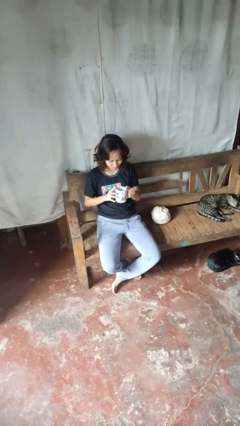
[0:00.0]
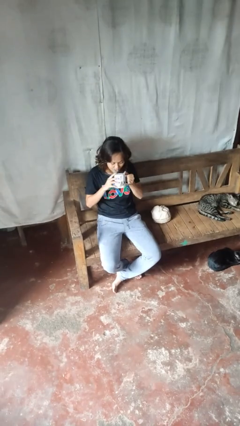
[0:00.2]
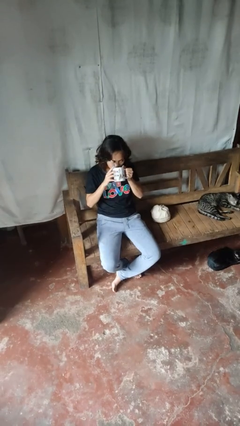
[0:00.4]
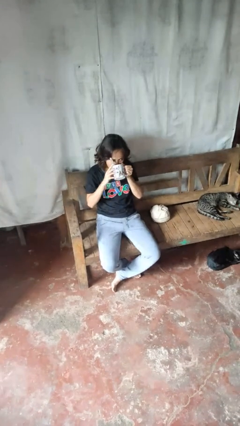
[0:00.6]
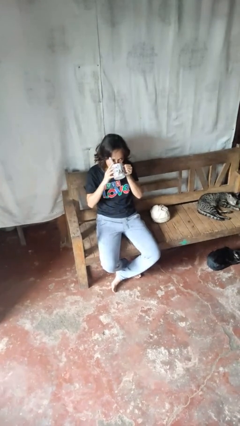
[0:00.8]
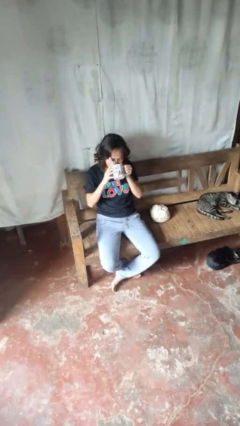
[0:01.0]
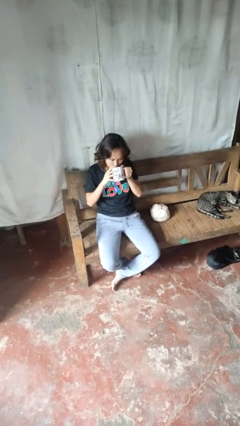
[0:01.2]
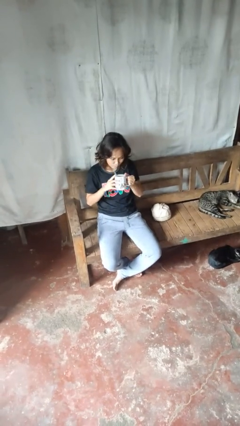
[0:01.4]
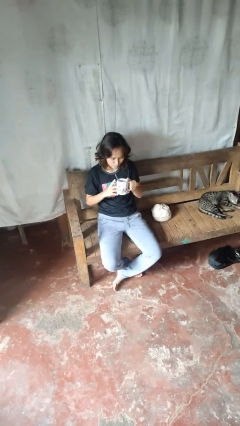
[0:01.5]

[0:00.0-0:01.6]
person drinks from mug

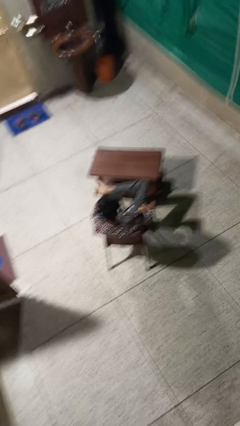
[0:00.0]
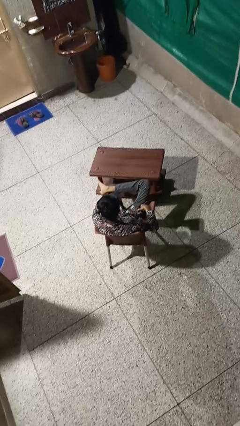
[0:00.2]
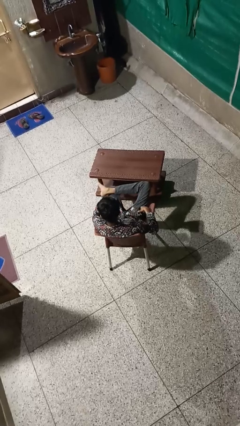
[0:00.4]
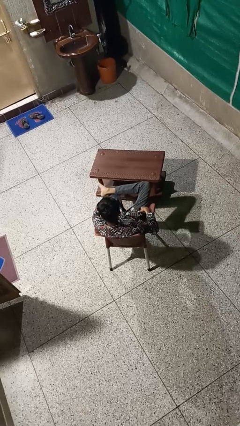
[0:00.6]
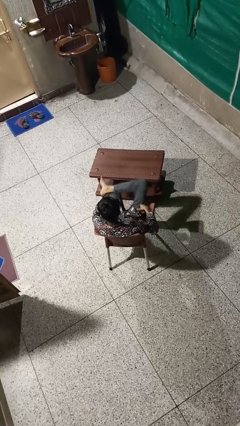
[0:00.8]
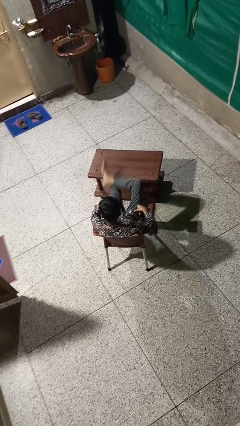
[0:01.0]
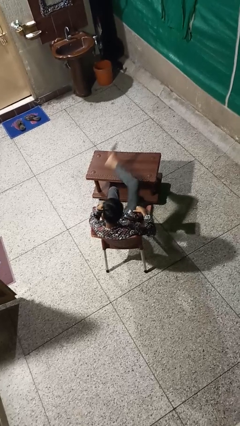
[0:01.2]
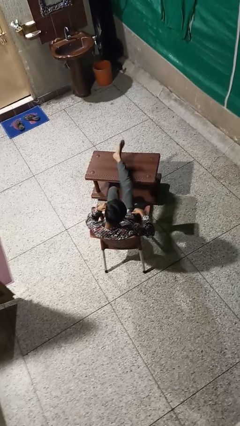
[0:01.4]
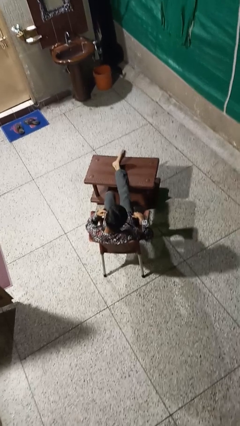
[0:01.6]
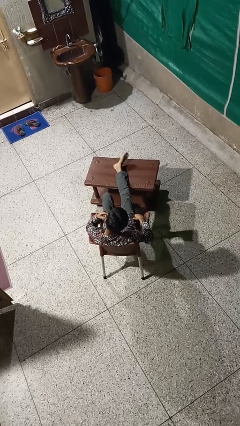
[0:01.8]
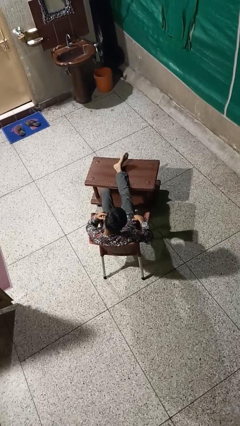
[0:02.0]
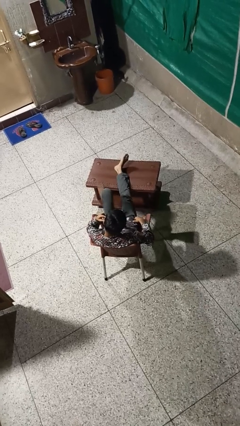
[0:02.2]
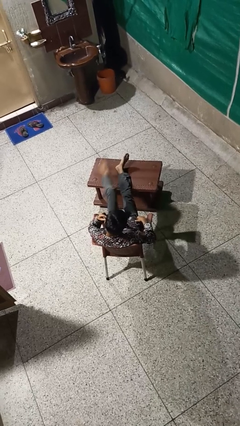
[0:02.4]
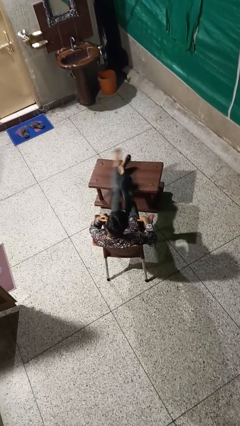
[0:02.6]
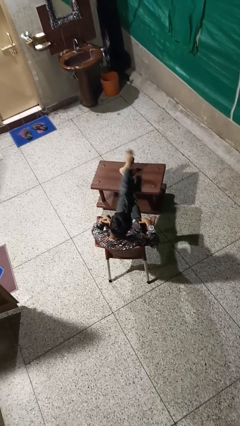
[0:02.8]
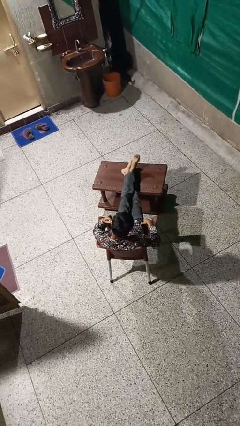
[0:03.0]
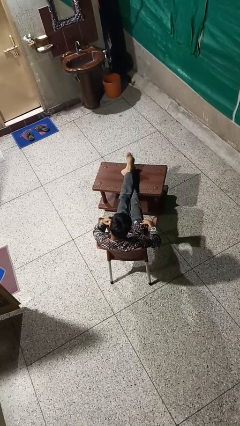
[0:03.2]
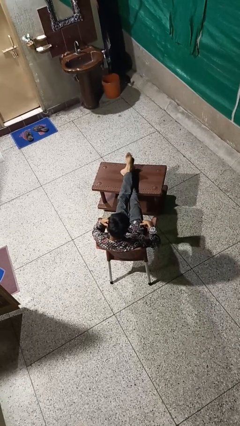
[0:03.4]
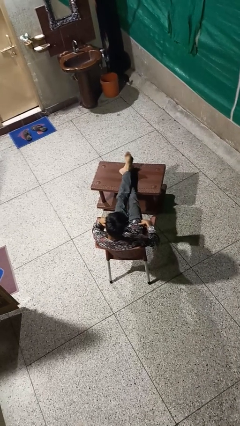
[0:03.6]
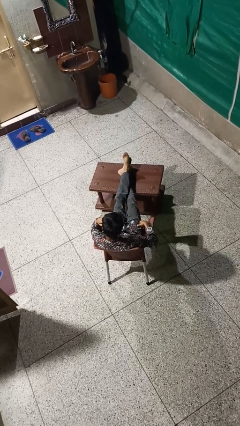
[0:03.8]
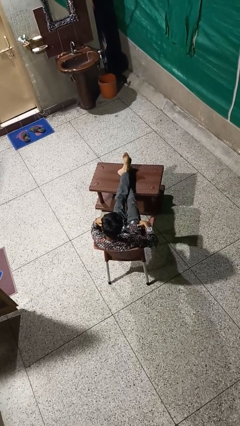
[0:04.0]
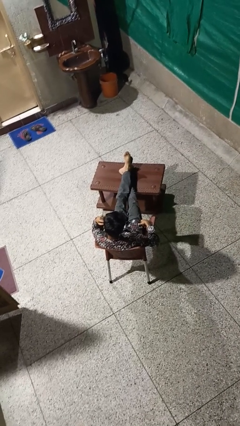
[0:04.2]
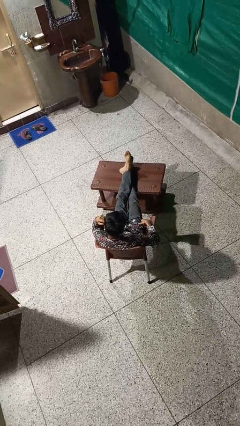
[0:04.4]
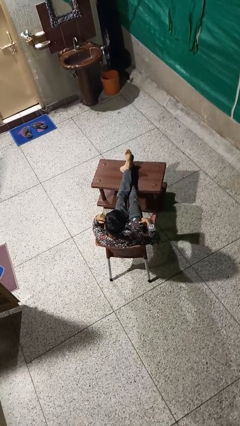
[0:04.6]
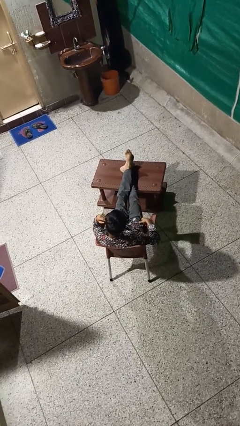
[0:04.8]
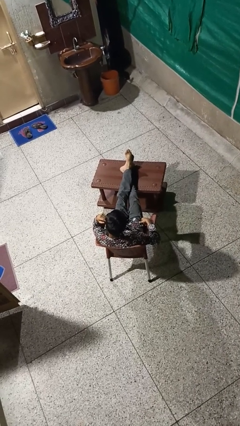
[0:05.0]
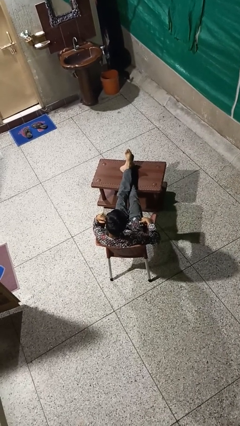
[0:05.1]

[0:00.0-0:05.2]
person puts feet up

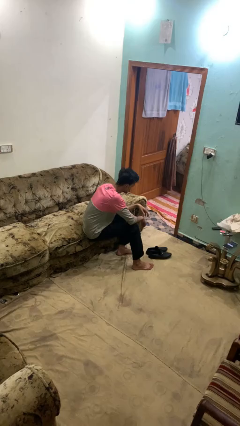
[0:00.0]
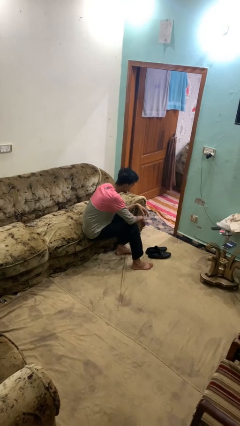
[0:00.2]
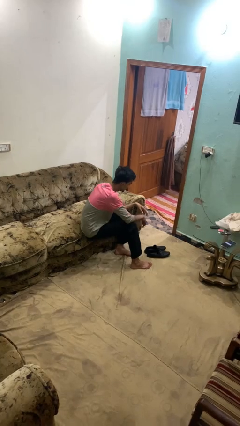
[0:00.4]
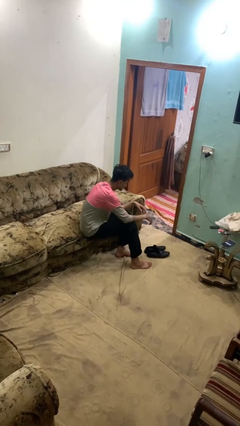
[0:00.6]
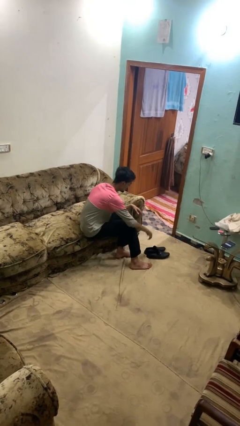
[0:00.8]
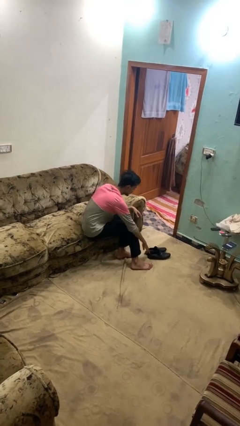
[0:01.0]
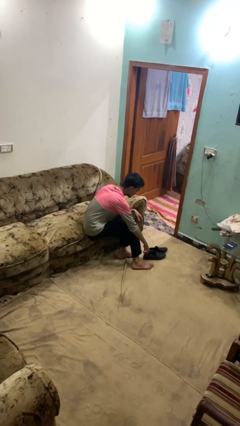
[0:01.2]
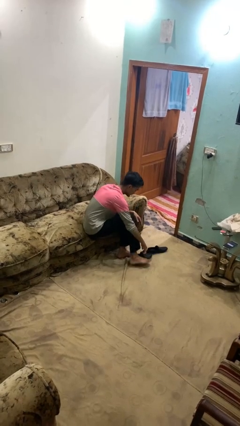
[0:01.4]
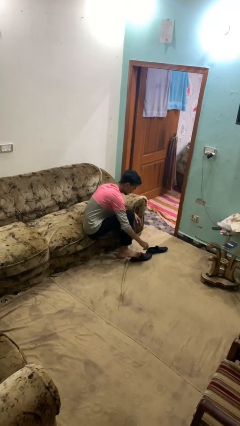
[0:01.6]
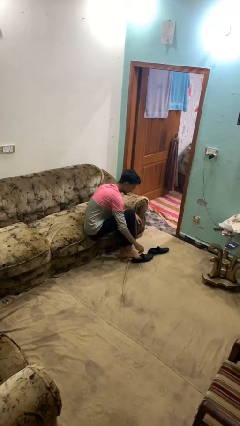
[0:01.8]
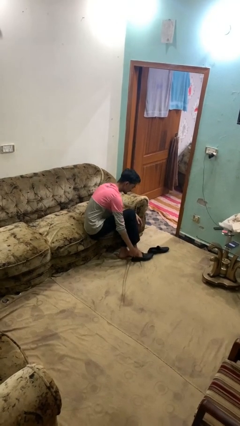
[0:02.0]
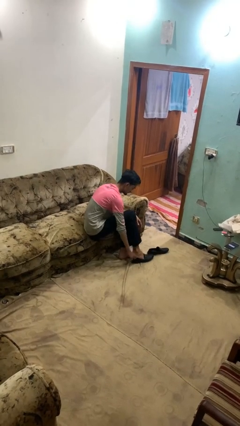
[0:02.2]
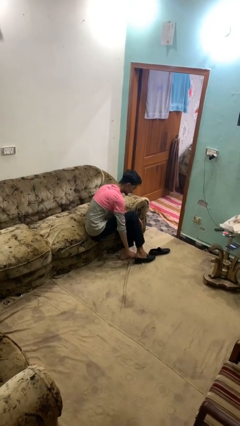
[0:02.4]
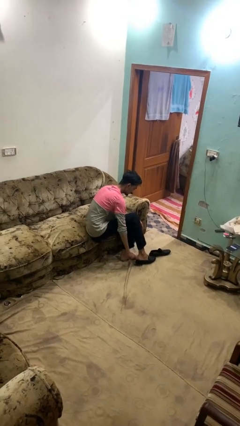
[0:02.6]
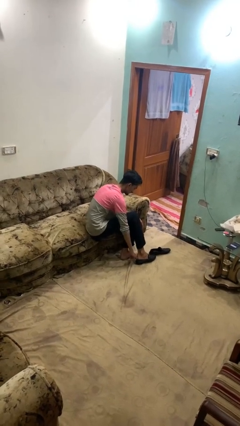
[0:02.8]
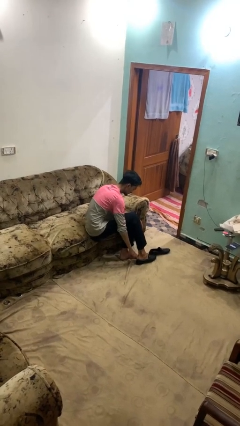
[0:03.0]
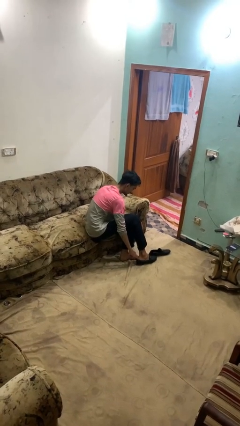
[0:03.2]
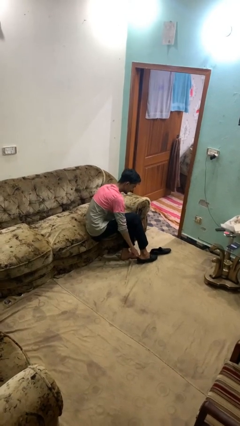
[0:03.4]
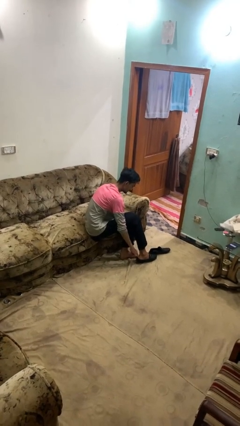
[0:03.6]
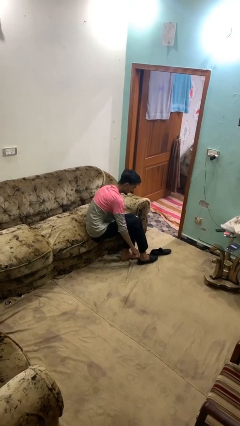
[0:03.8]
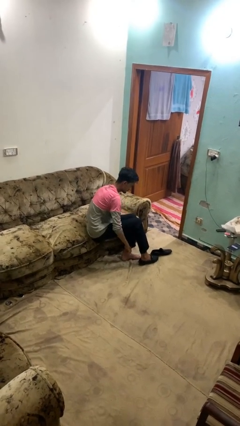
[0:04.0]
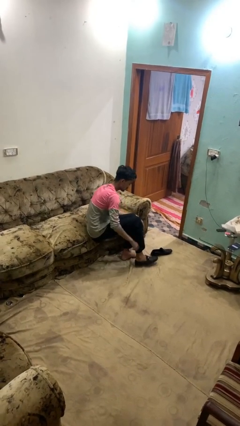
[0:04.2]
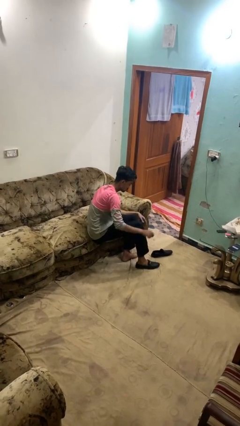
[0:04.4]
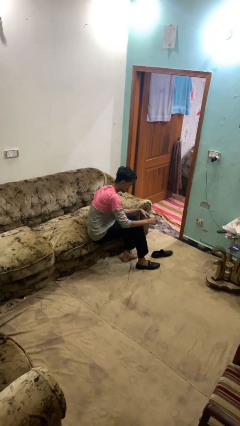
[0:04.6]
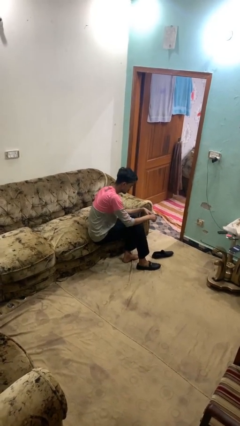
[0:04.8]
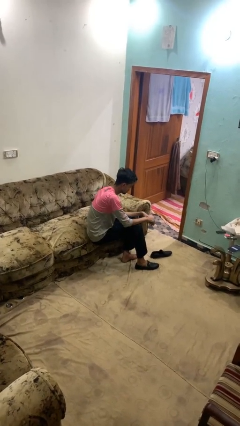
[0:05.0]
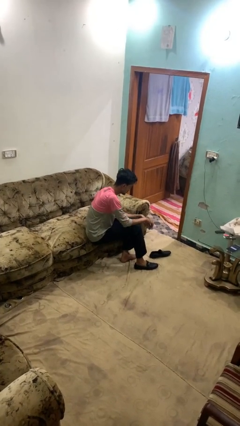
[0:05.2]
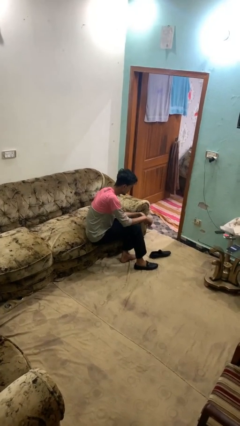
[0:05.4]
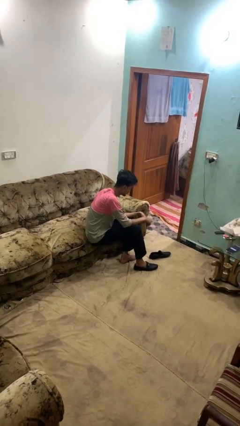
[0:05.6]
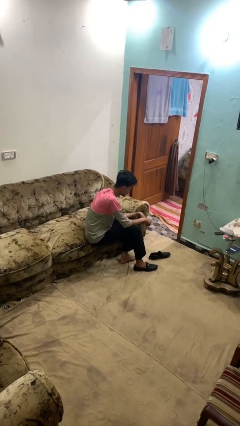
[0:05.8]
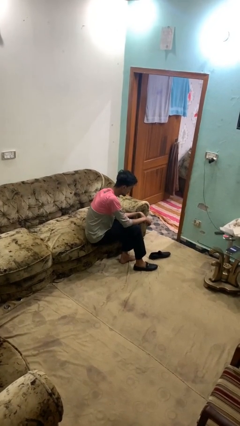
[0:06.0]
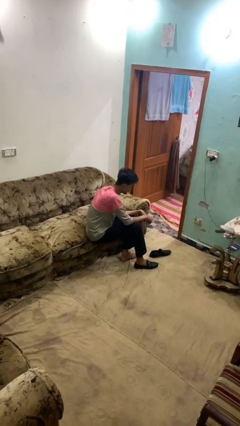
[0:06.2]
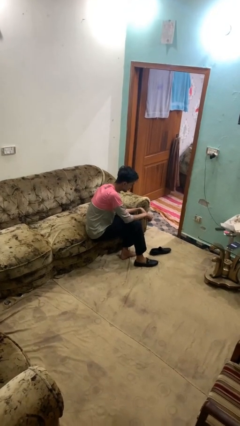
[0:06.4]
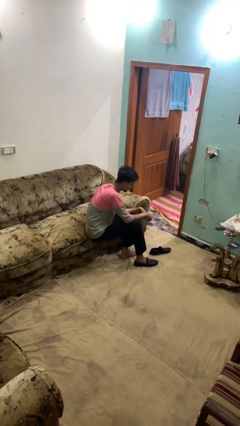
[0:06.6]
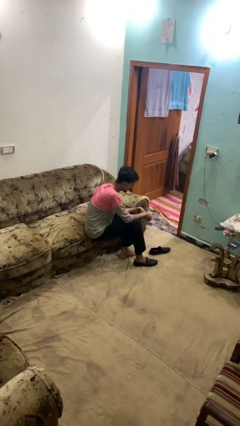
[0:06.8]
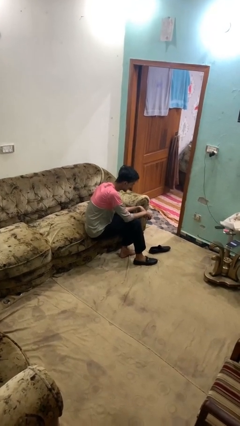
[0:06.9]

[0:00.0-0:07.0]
person puts on shoes

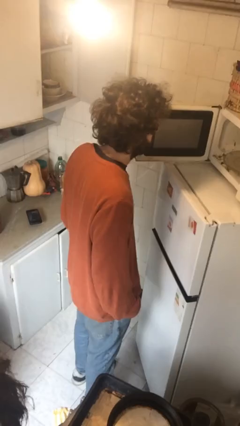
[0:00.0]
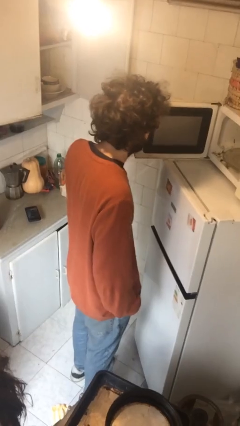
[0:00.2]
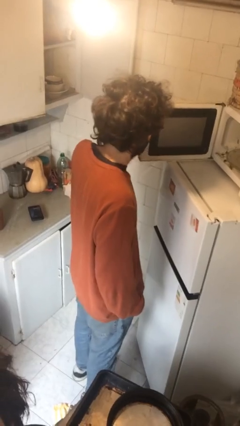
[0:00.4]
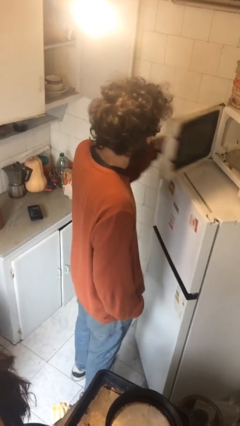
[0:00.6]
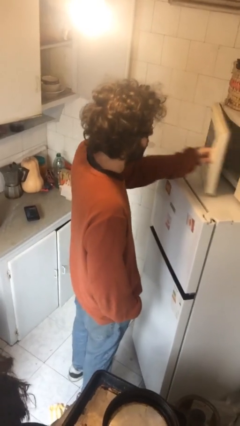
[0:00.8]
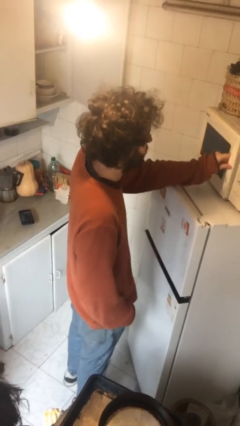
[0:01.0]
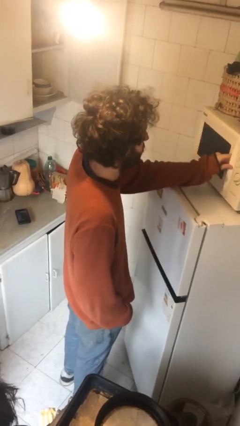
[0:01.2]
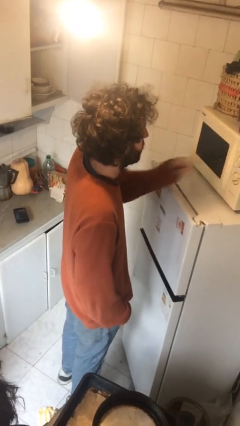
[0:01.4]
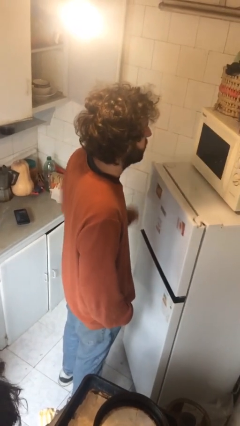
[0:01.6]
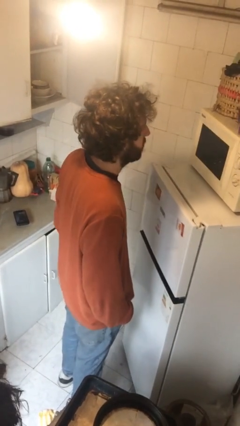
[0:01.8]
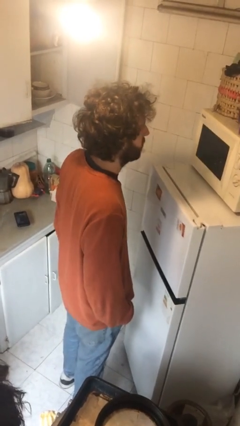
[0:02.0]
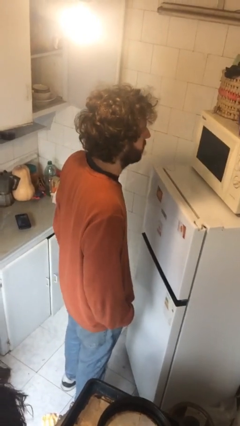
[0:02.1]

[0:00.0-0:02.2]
person closes microwave

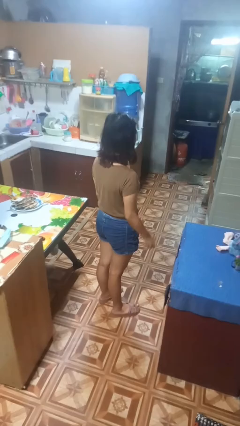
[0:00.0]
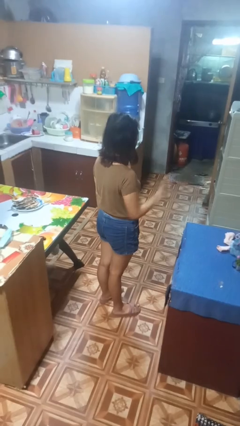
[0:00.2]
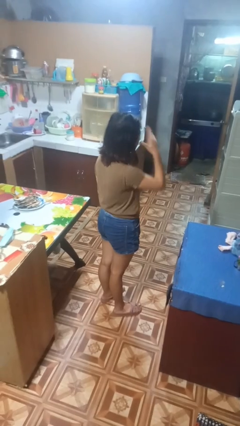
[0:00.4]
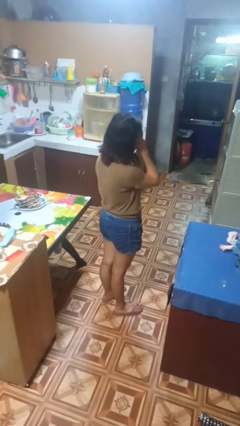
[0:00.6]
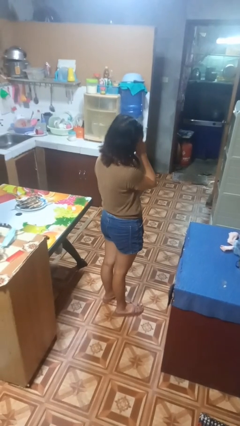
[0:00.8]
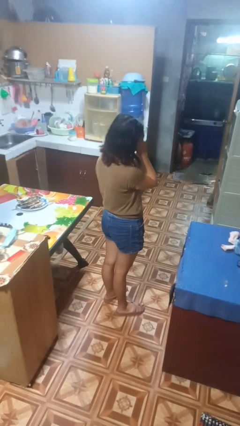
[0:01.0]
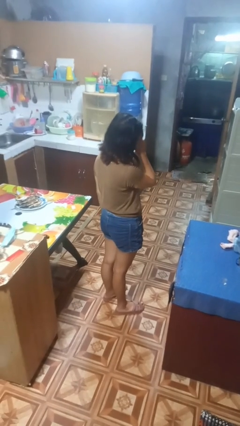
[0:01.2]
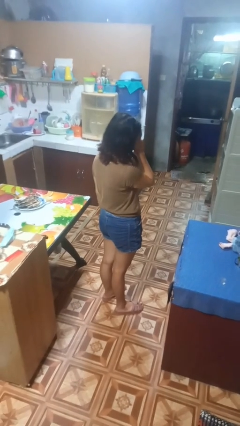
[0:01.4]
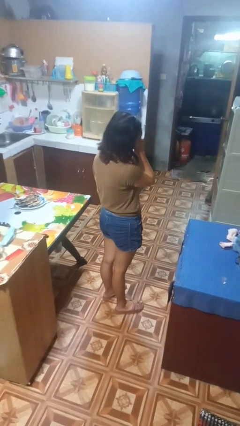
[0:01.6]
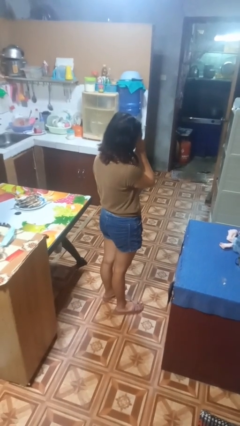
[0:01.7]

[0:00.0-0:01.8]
person covers face with hands
